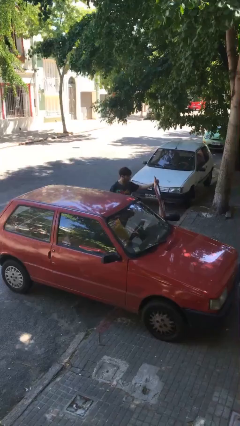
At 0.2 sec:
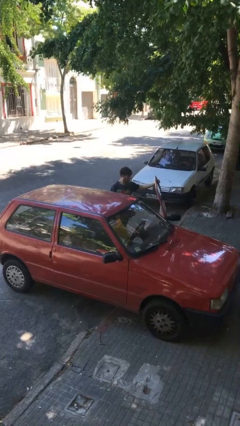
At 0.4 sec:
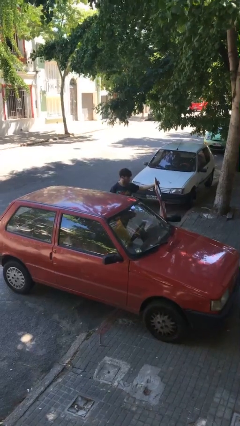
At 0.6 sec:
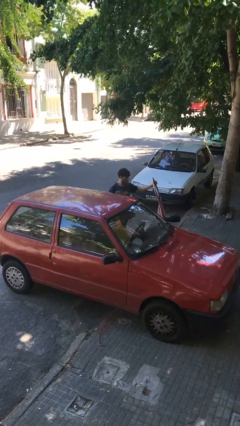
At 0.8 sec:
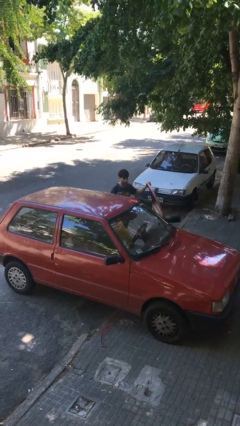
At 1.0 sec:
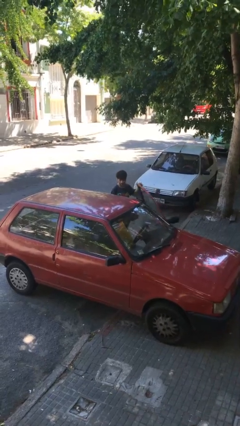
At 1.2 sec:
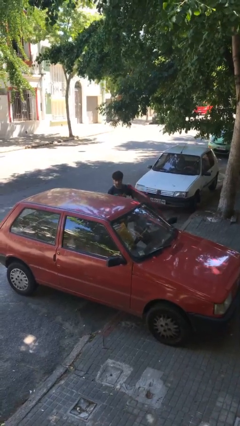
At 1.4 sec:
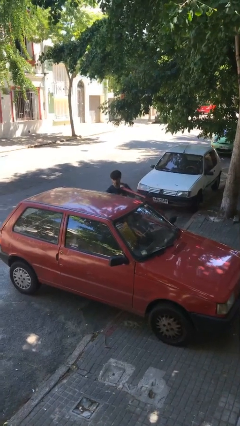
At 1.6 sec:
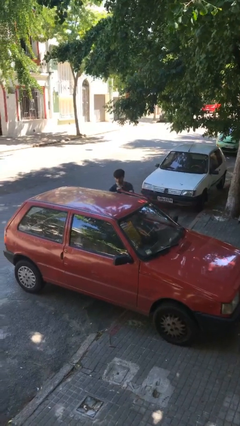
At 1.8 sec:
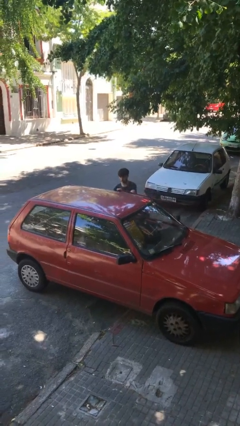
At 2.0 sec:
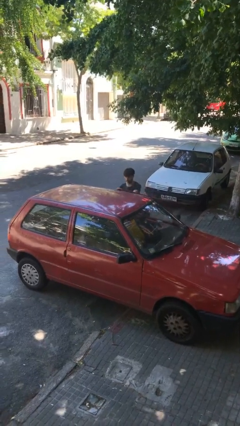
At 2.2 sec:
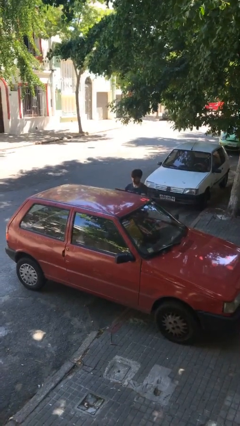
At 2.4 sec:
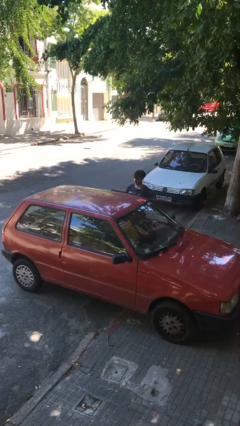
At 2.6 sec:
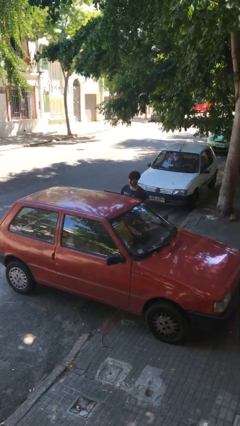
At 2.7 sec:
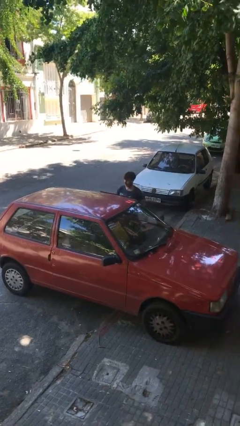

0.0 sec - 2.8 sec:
person closes car door

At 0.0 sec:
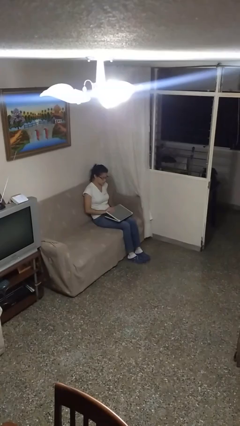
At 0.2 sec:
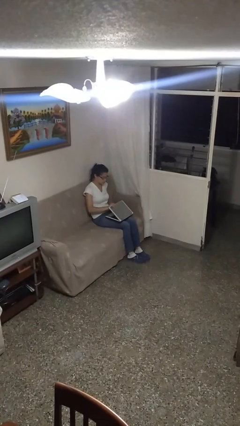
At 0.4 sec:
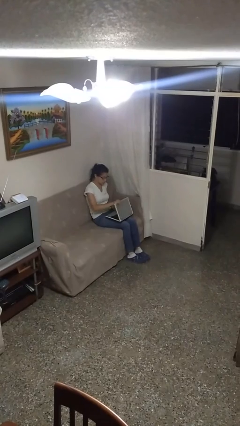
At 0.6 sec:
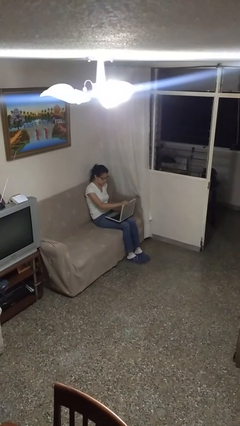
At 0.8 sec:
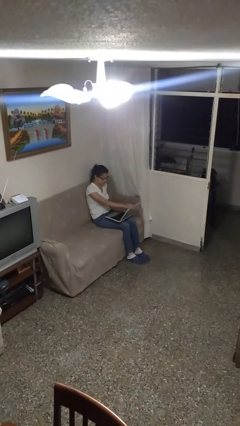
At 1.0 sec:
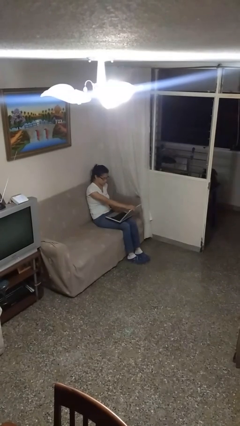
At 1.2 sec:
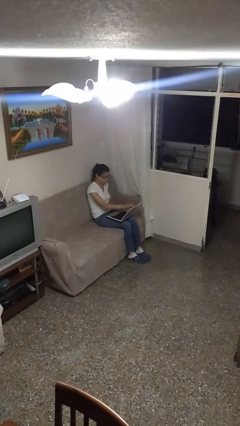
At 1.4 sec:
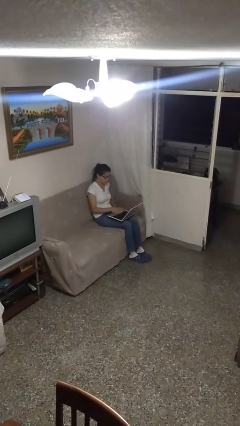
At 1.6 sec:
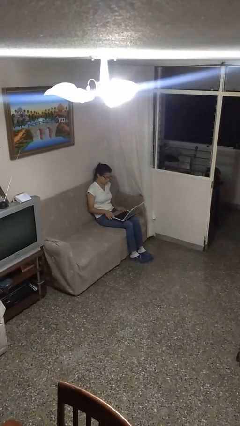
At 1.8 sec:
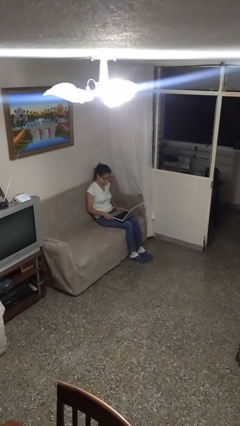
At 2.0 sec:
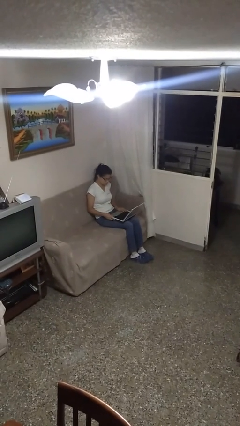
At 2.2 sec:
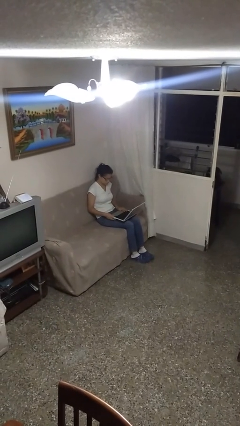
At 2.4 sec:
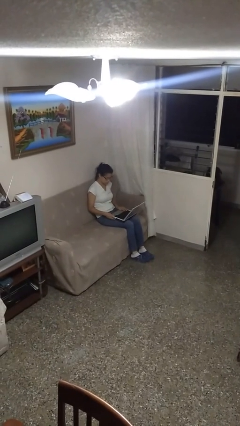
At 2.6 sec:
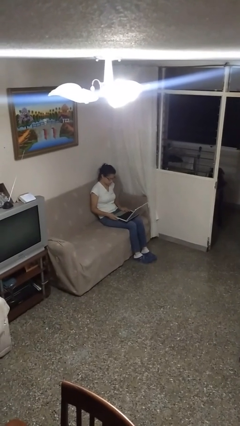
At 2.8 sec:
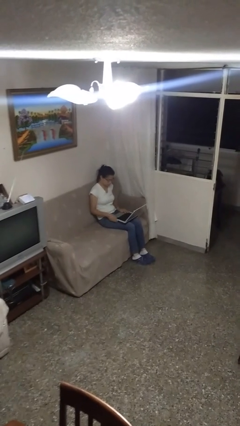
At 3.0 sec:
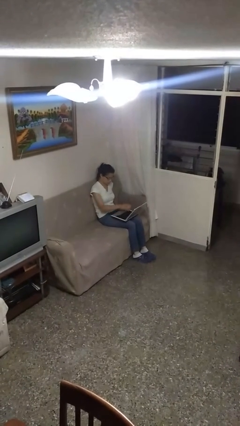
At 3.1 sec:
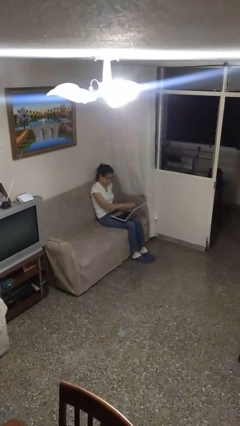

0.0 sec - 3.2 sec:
person opens laptop

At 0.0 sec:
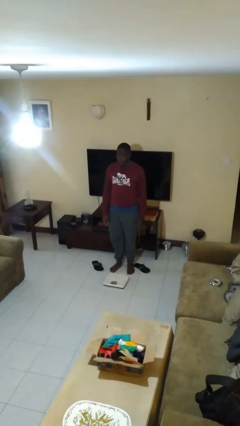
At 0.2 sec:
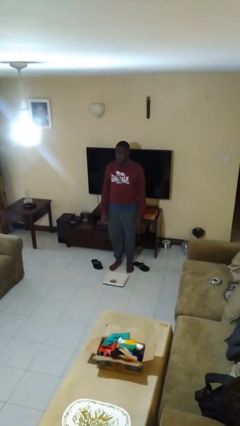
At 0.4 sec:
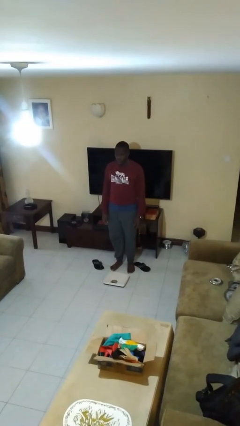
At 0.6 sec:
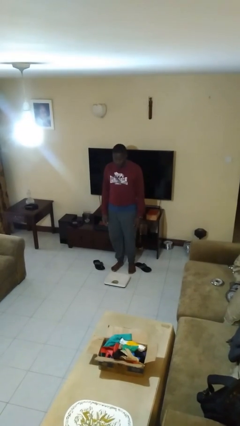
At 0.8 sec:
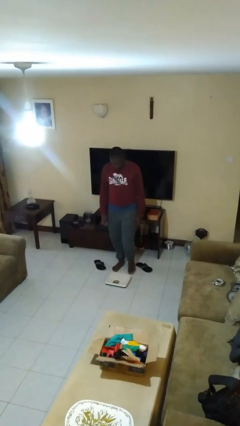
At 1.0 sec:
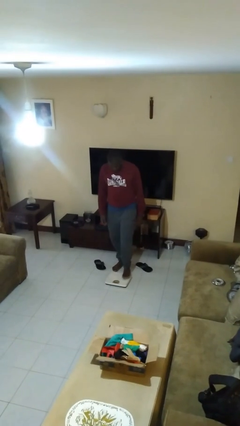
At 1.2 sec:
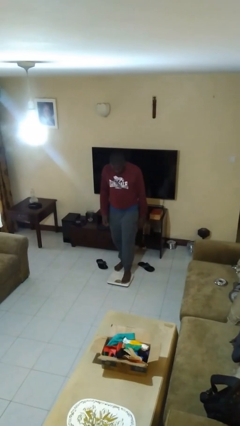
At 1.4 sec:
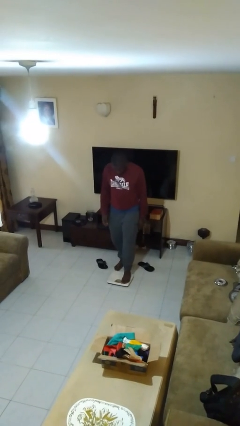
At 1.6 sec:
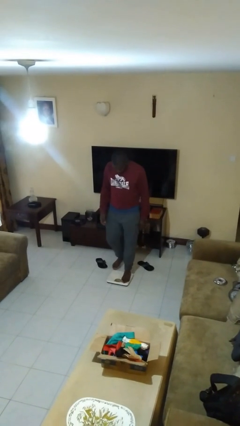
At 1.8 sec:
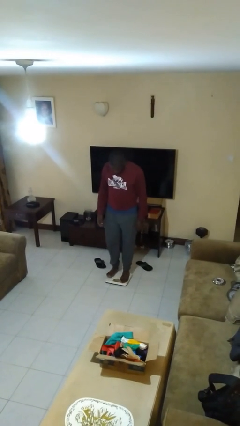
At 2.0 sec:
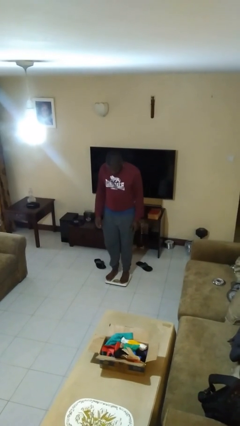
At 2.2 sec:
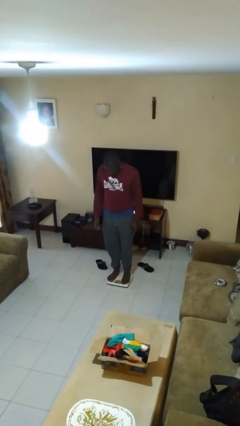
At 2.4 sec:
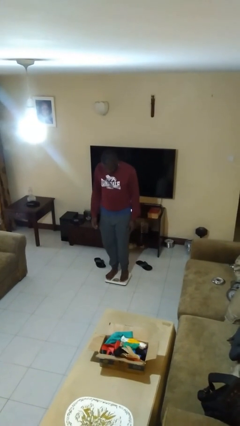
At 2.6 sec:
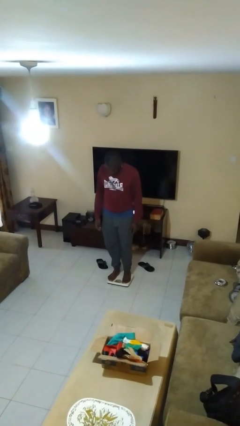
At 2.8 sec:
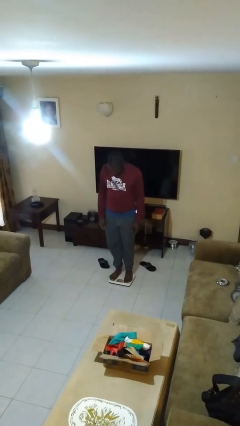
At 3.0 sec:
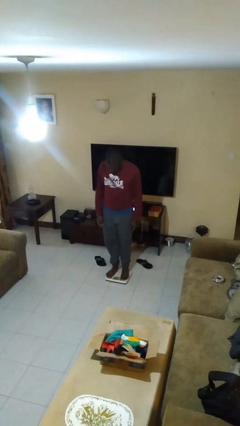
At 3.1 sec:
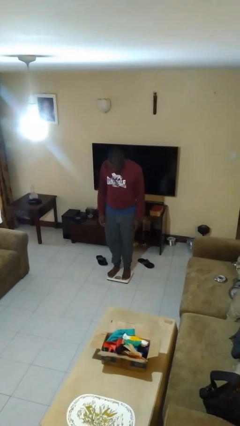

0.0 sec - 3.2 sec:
person uses bodyweight scale

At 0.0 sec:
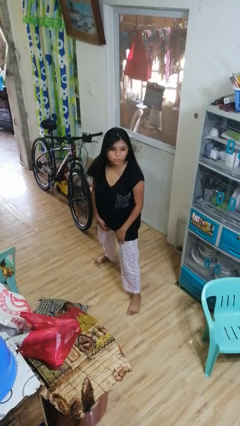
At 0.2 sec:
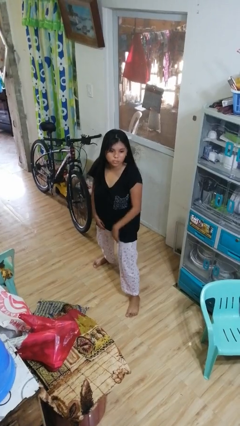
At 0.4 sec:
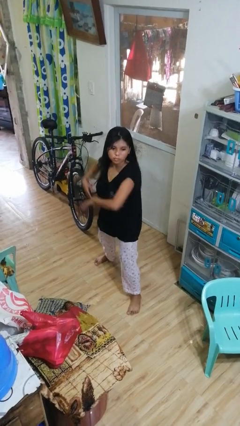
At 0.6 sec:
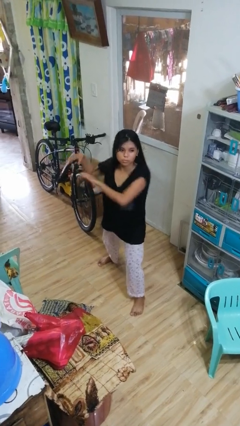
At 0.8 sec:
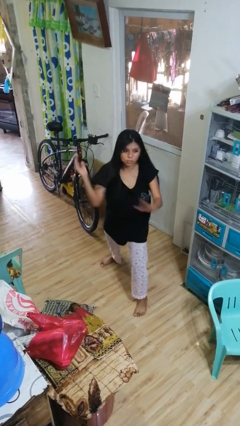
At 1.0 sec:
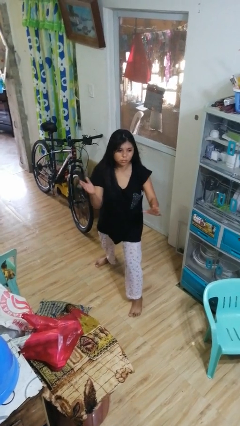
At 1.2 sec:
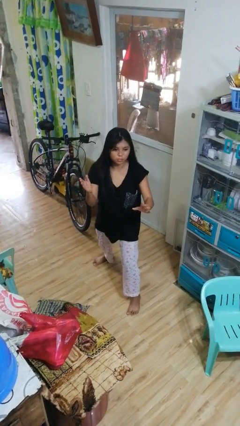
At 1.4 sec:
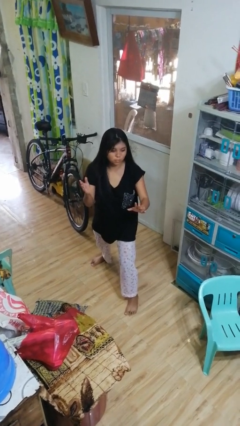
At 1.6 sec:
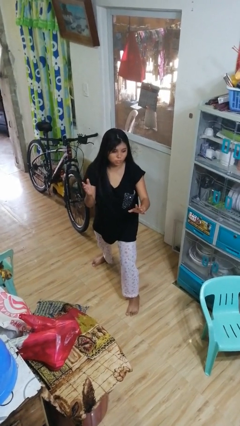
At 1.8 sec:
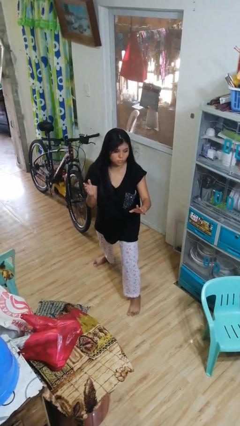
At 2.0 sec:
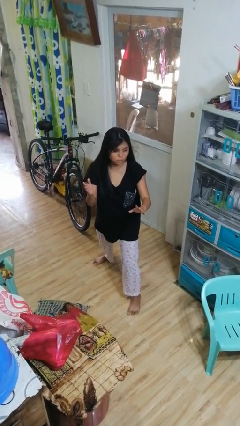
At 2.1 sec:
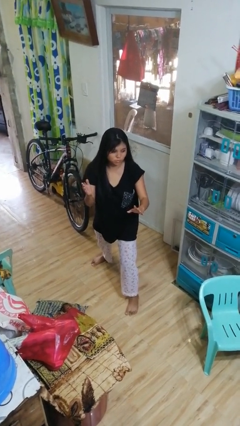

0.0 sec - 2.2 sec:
person karate chop

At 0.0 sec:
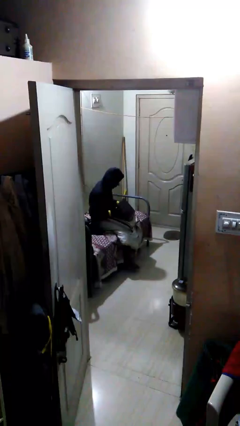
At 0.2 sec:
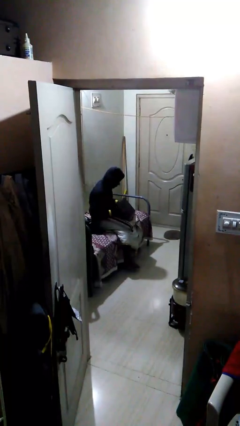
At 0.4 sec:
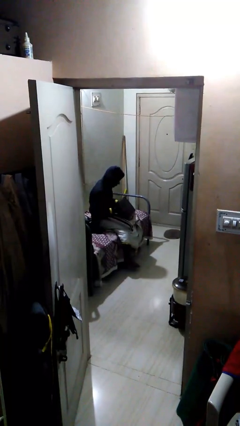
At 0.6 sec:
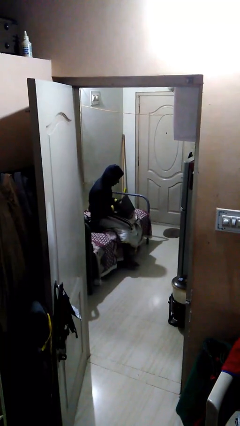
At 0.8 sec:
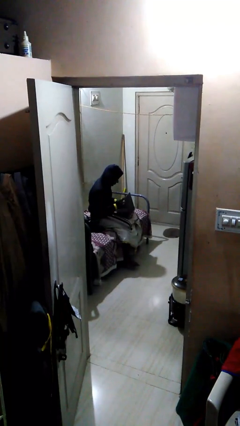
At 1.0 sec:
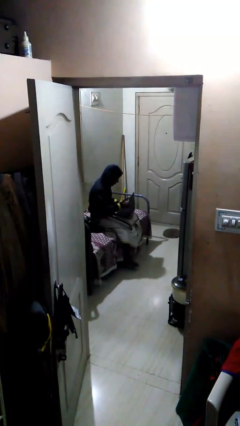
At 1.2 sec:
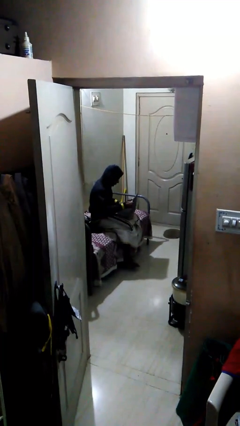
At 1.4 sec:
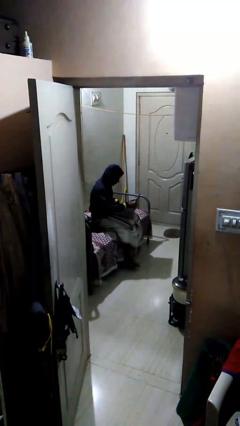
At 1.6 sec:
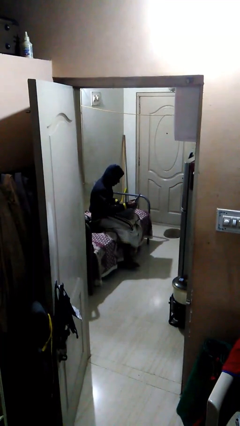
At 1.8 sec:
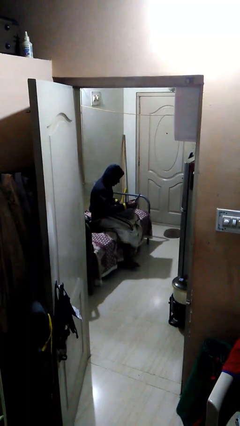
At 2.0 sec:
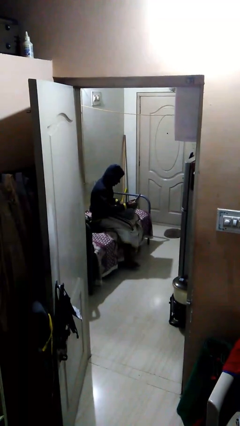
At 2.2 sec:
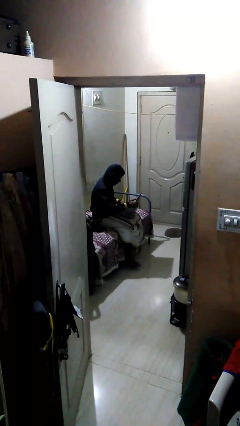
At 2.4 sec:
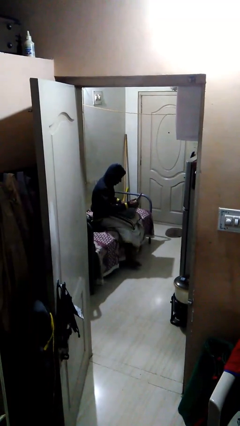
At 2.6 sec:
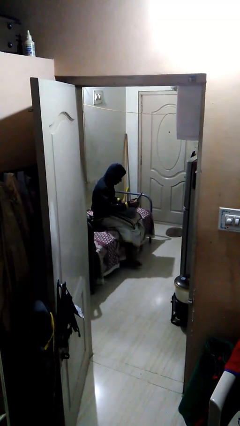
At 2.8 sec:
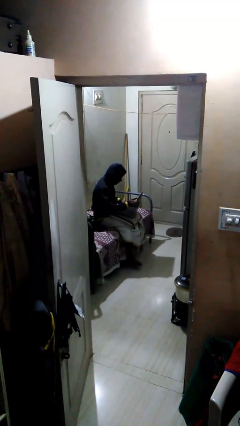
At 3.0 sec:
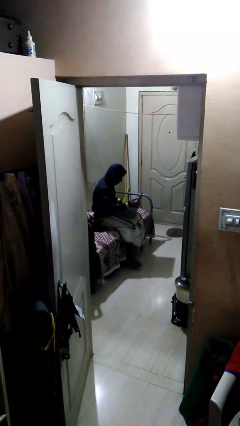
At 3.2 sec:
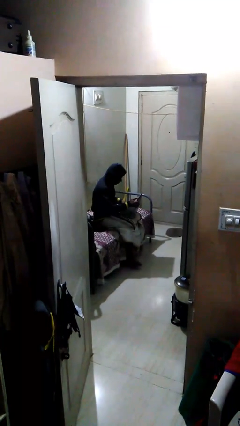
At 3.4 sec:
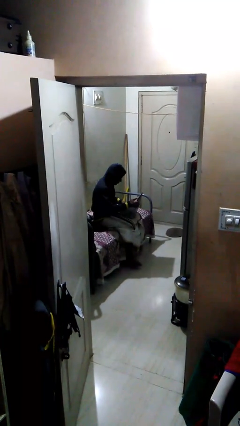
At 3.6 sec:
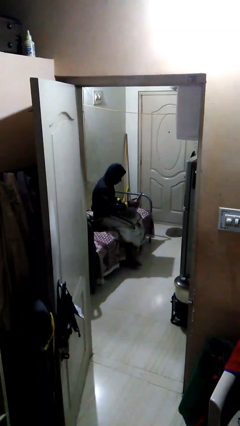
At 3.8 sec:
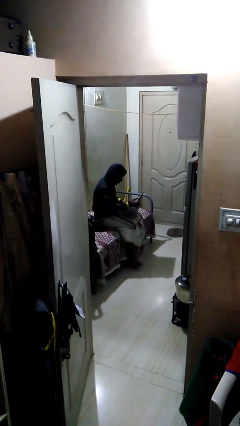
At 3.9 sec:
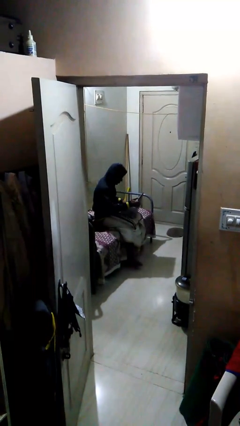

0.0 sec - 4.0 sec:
person interacts with laptop

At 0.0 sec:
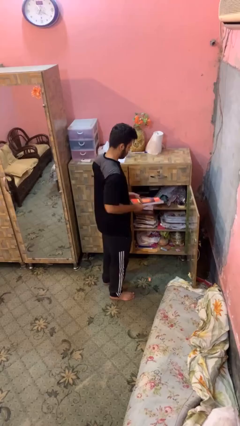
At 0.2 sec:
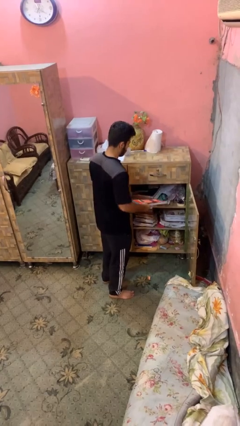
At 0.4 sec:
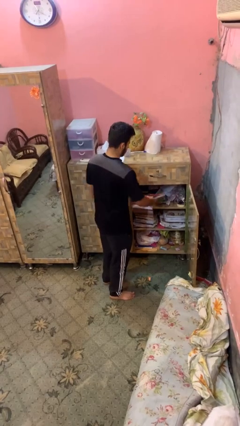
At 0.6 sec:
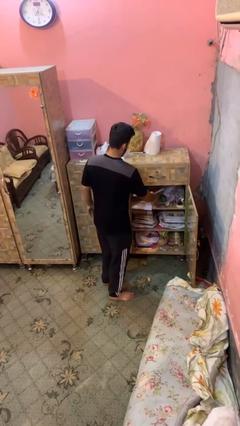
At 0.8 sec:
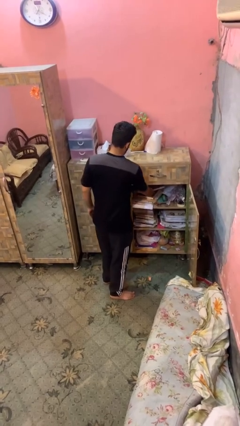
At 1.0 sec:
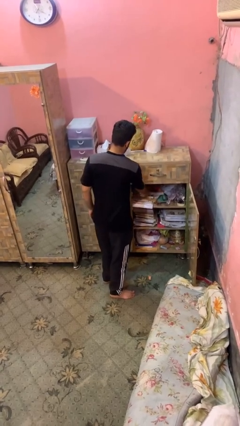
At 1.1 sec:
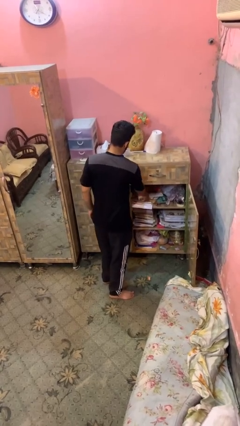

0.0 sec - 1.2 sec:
person puts down object into cabinet

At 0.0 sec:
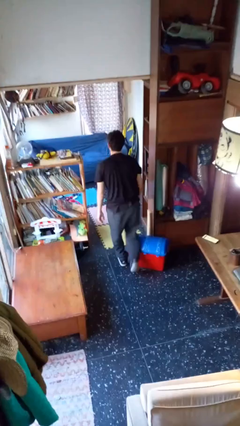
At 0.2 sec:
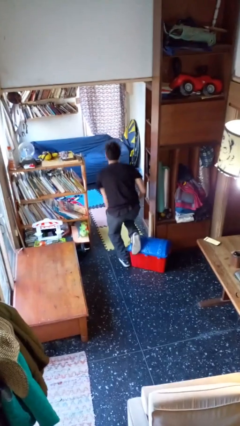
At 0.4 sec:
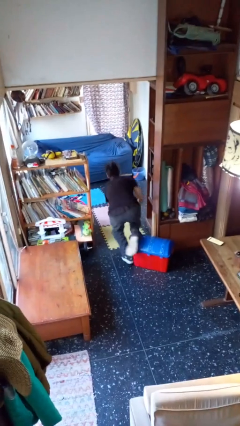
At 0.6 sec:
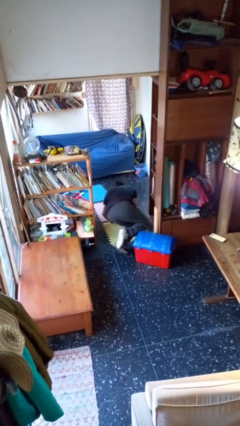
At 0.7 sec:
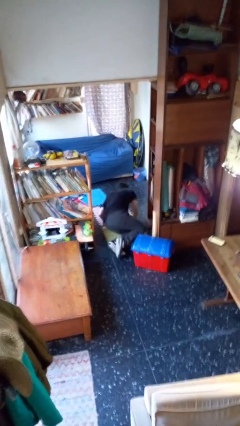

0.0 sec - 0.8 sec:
person trips on object on floor
